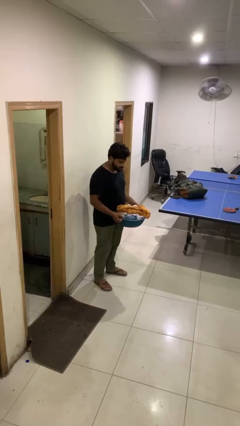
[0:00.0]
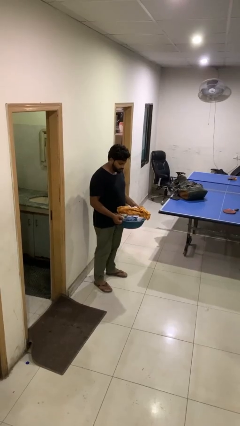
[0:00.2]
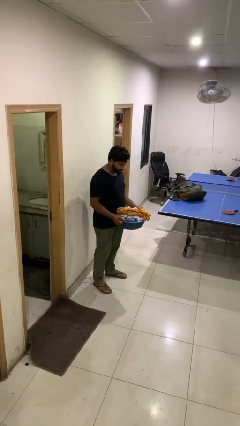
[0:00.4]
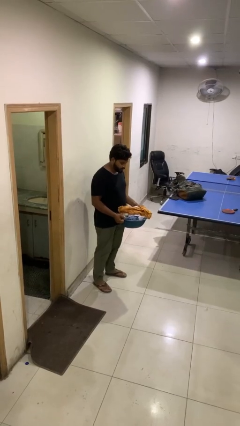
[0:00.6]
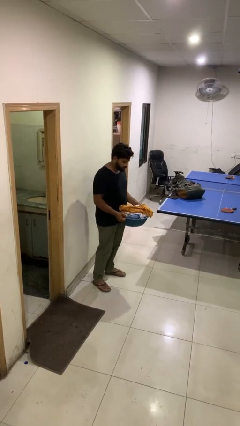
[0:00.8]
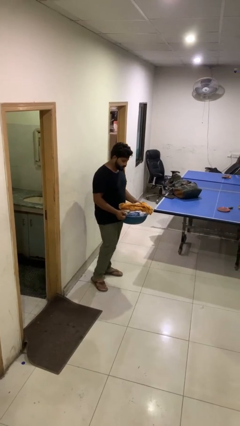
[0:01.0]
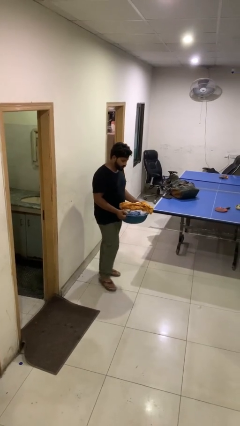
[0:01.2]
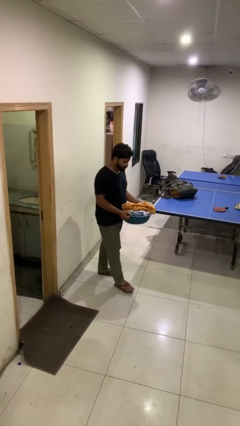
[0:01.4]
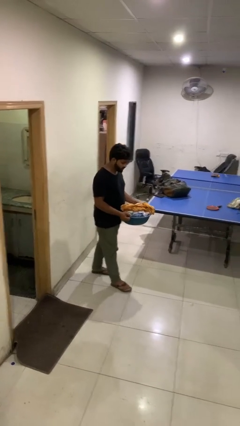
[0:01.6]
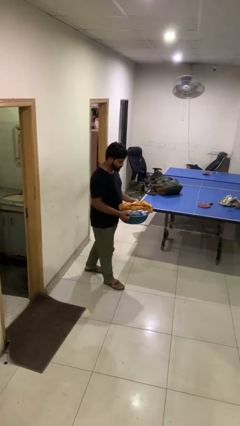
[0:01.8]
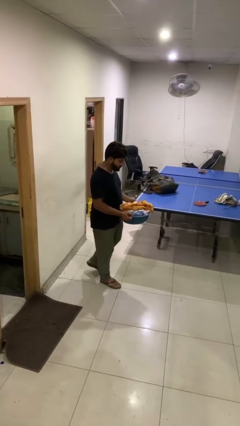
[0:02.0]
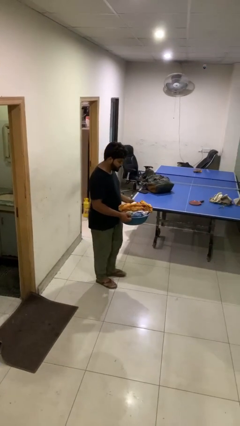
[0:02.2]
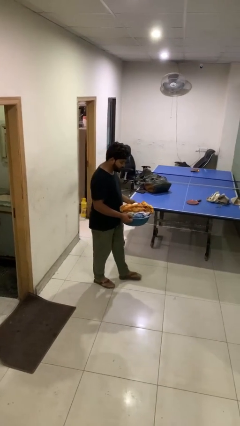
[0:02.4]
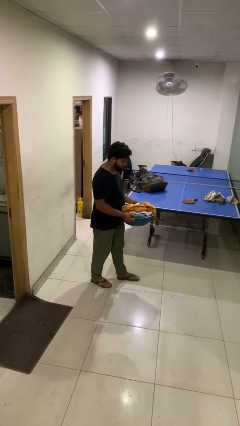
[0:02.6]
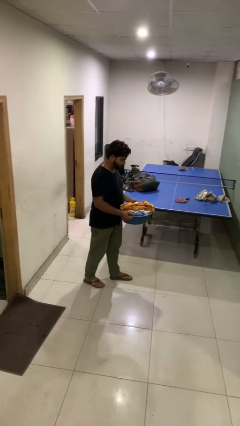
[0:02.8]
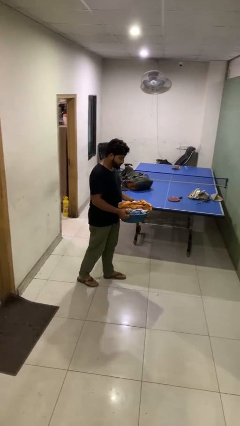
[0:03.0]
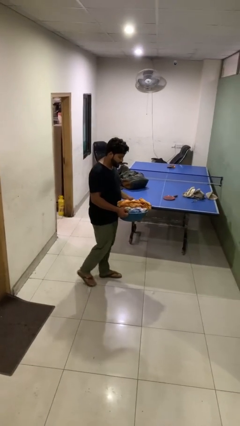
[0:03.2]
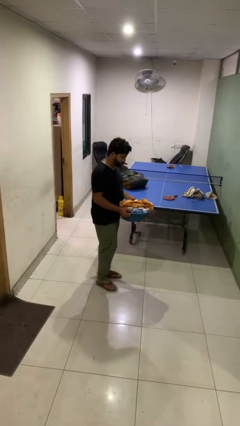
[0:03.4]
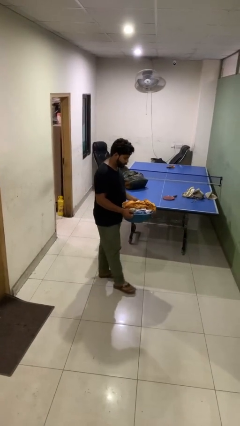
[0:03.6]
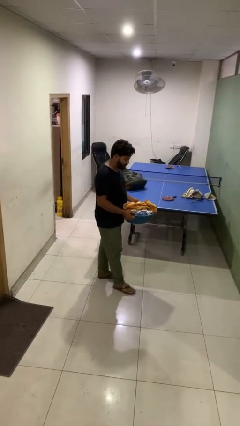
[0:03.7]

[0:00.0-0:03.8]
person carries laundry basket

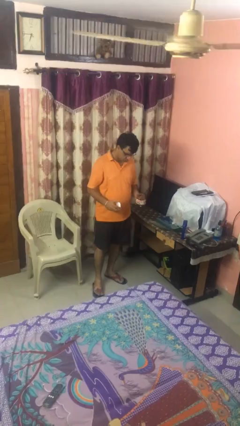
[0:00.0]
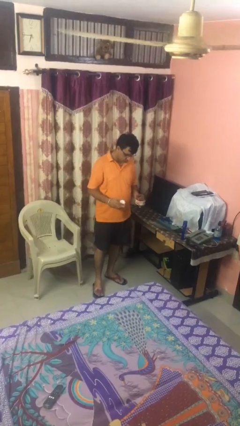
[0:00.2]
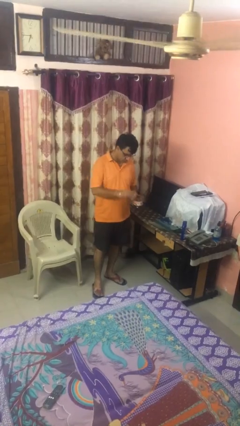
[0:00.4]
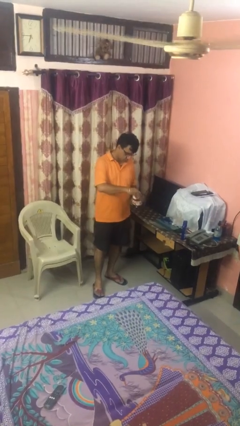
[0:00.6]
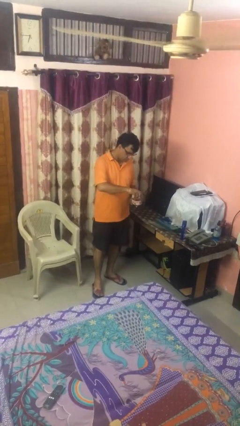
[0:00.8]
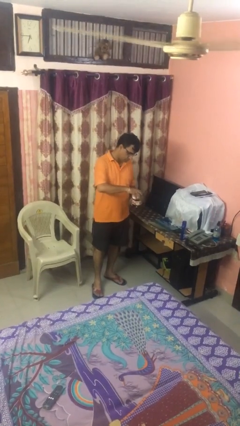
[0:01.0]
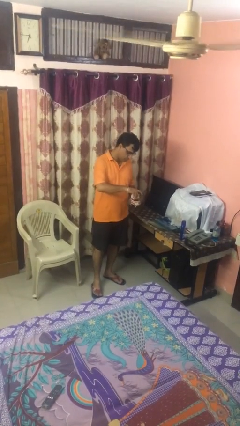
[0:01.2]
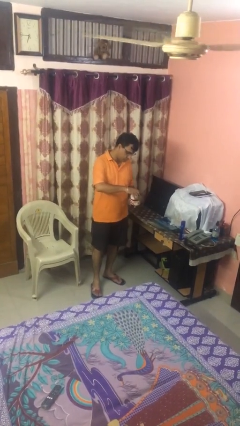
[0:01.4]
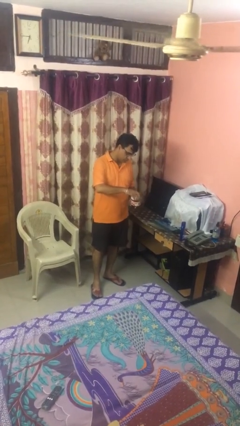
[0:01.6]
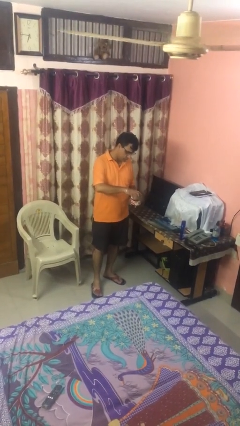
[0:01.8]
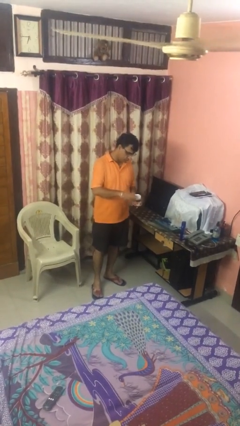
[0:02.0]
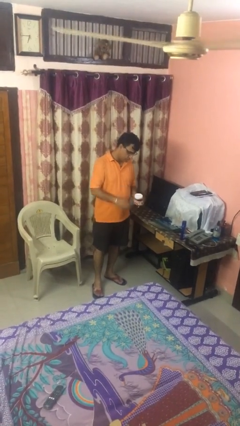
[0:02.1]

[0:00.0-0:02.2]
person closes jar

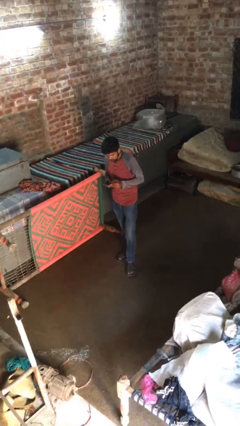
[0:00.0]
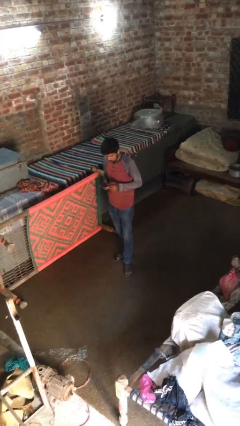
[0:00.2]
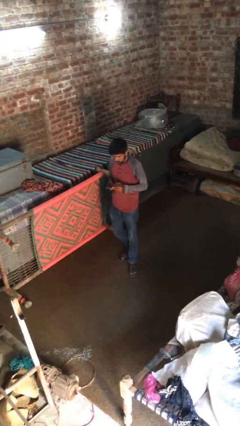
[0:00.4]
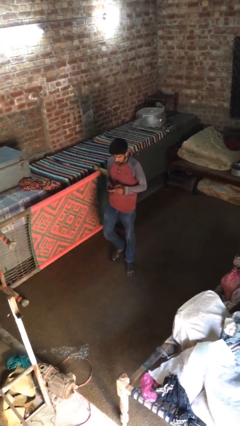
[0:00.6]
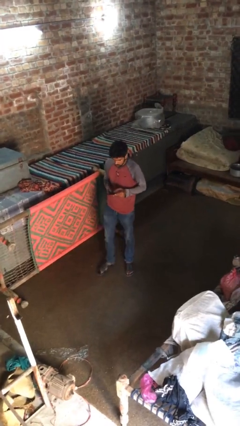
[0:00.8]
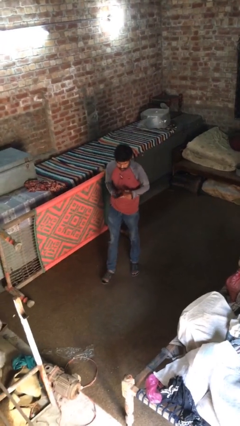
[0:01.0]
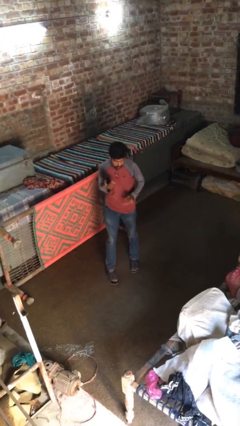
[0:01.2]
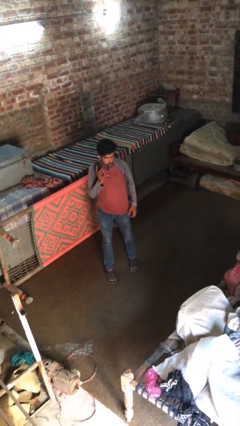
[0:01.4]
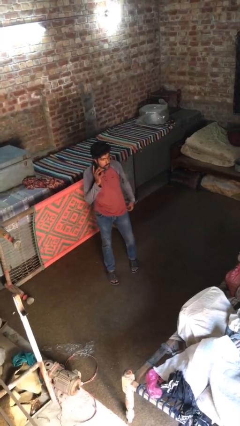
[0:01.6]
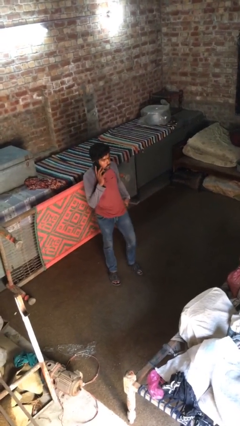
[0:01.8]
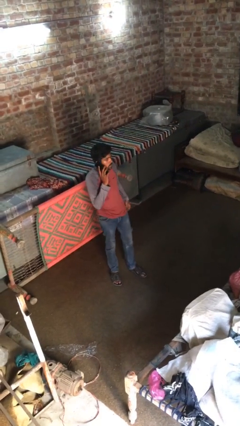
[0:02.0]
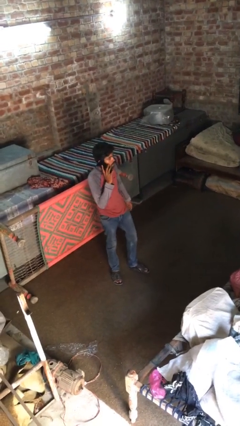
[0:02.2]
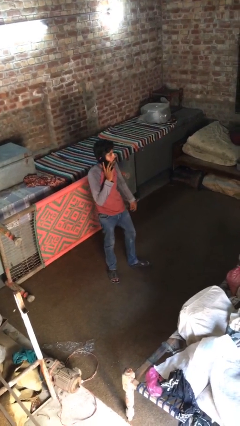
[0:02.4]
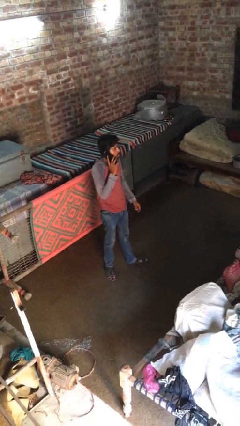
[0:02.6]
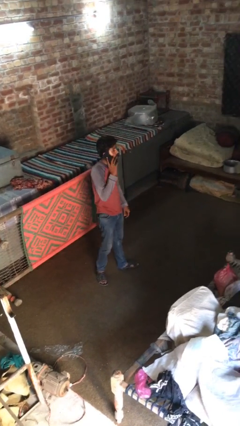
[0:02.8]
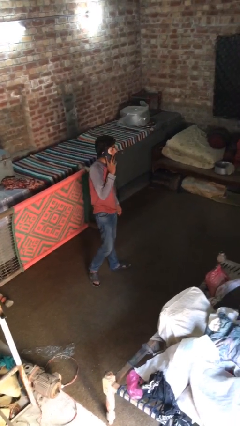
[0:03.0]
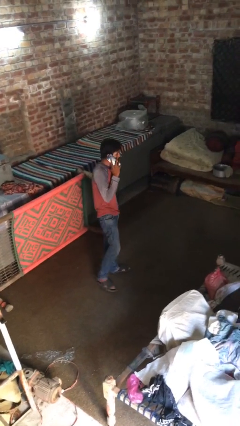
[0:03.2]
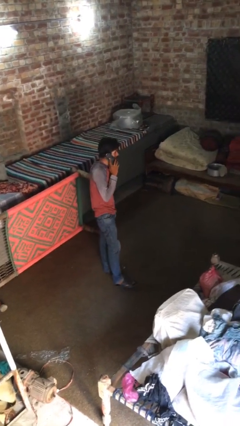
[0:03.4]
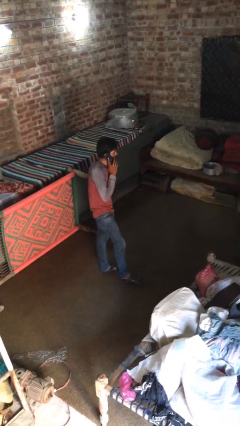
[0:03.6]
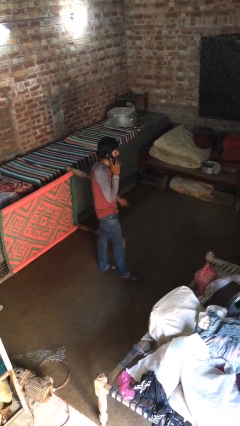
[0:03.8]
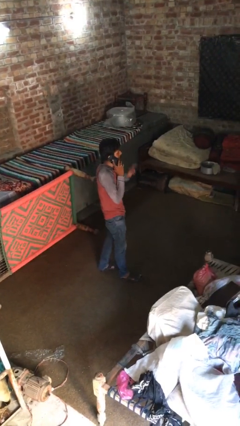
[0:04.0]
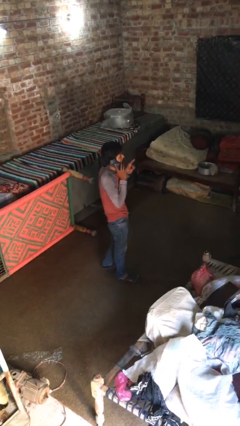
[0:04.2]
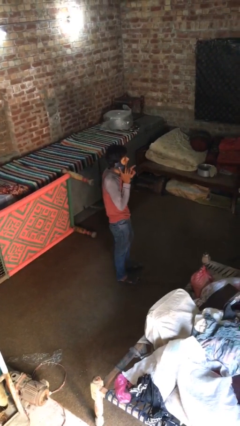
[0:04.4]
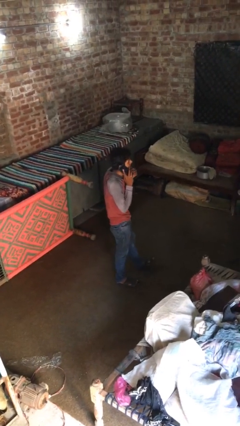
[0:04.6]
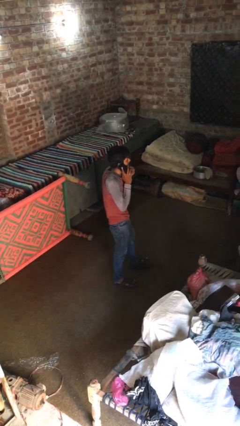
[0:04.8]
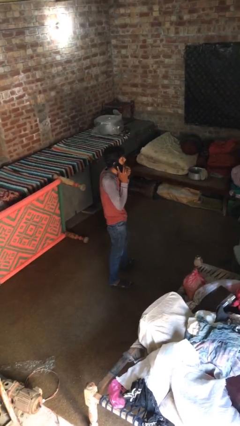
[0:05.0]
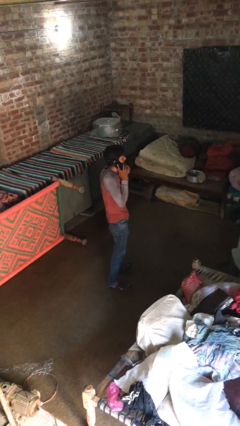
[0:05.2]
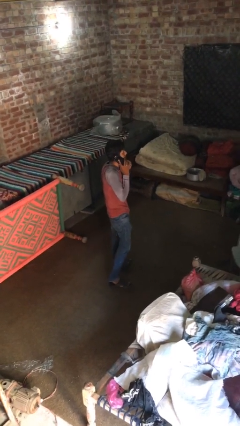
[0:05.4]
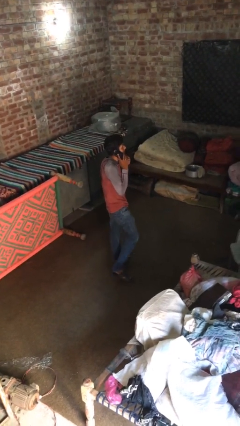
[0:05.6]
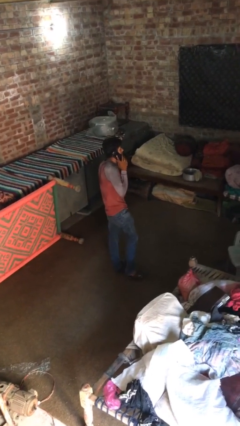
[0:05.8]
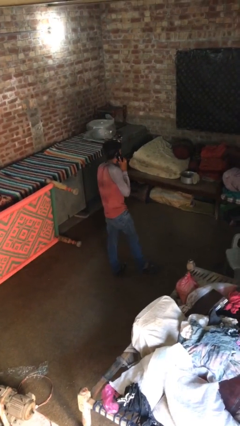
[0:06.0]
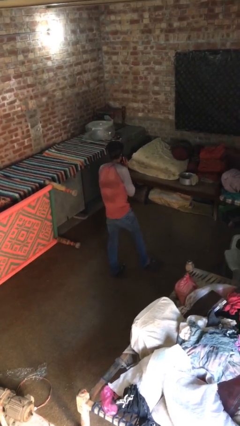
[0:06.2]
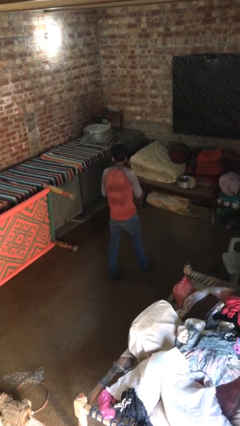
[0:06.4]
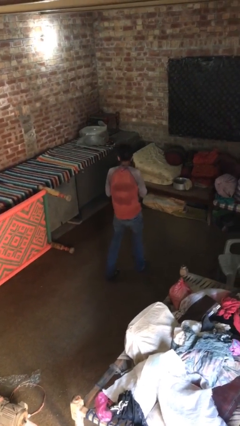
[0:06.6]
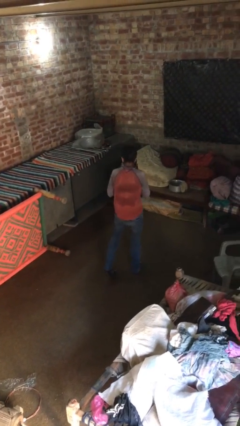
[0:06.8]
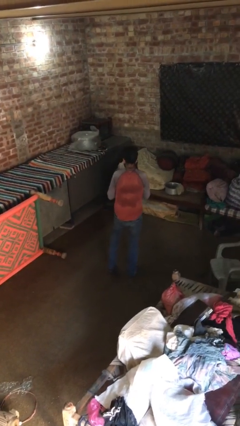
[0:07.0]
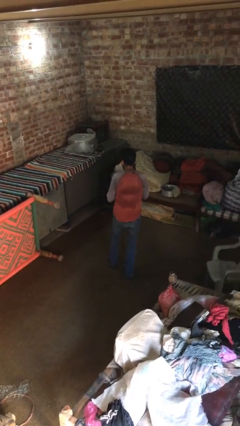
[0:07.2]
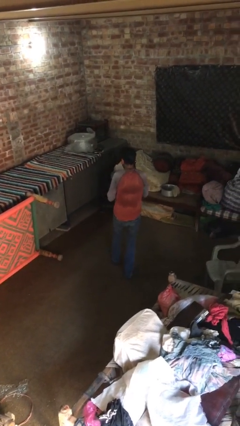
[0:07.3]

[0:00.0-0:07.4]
person talks on phone

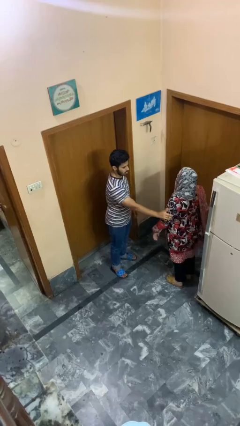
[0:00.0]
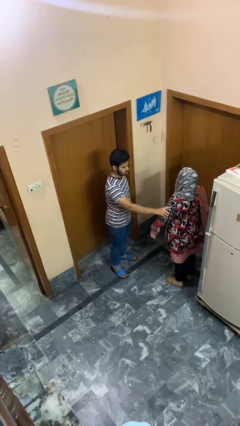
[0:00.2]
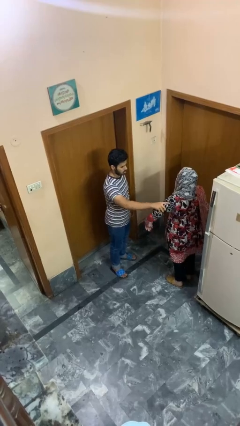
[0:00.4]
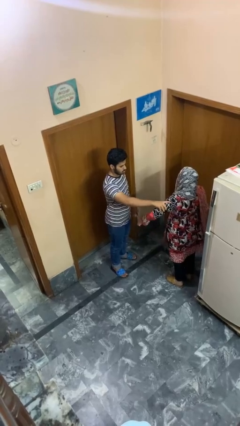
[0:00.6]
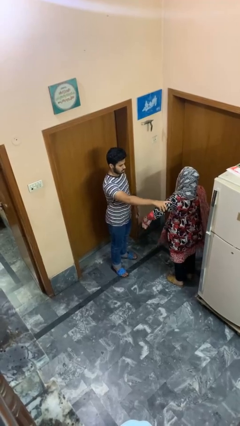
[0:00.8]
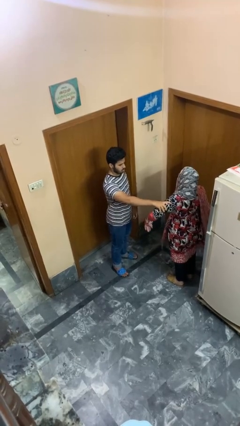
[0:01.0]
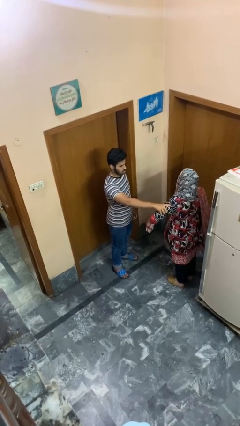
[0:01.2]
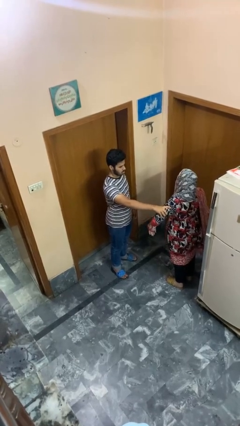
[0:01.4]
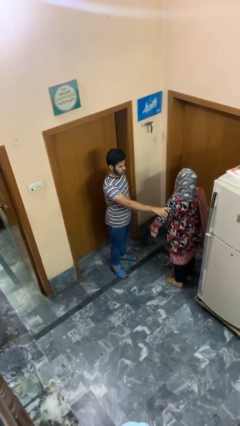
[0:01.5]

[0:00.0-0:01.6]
person grabs person by bicep

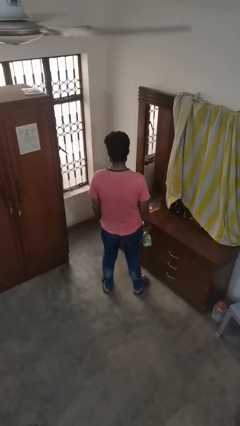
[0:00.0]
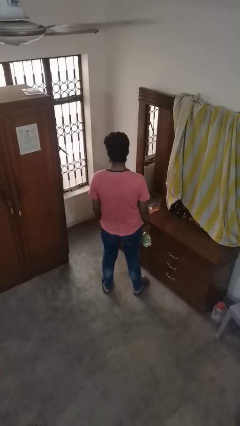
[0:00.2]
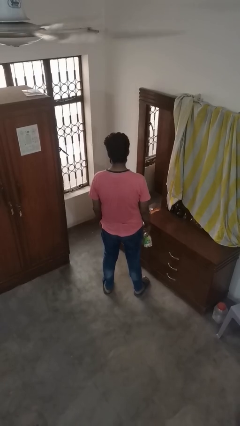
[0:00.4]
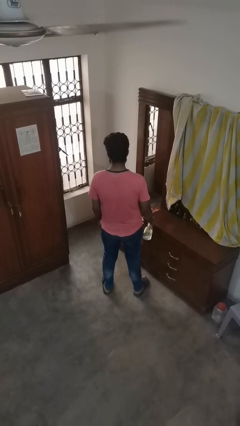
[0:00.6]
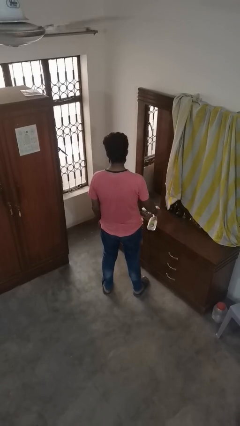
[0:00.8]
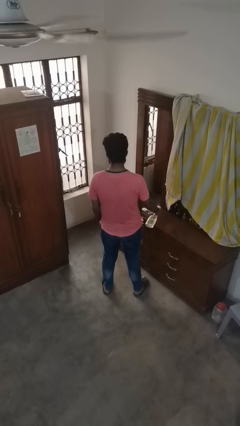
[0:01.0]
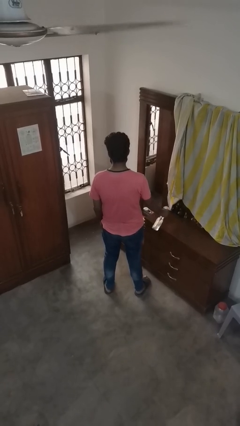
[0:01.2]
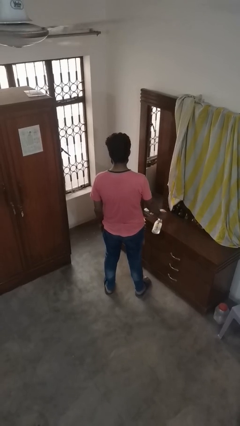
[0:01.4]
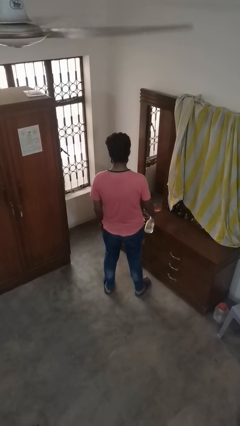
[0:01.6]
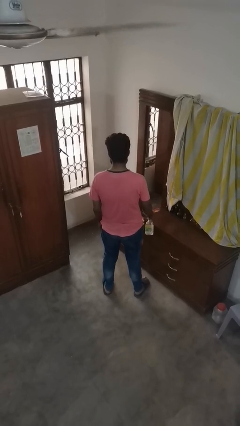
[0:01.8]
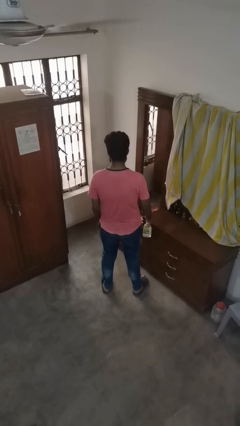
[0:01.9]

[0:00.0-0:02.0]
person sprays from bottle

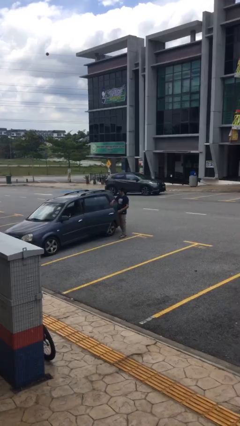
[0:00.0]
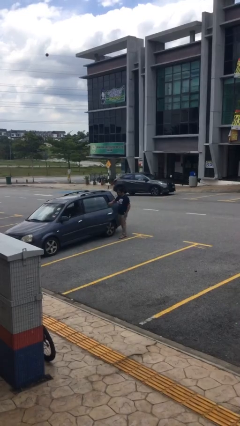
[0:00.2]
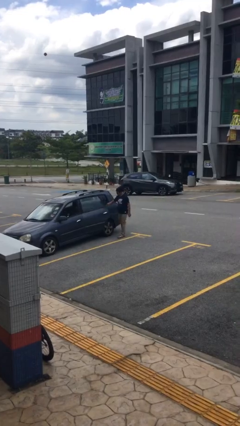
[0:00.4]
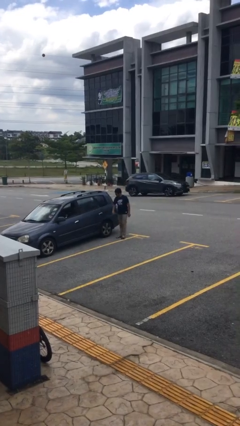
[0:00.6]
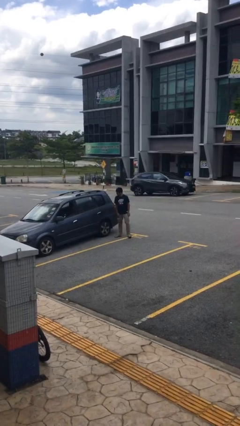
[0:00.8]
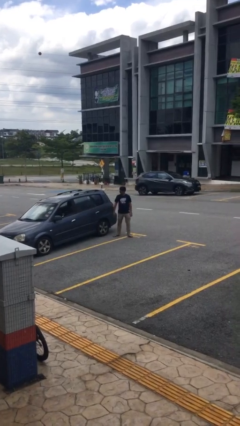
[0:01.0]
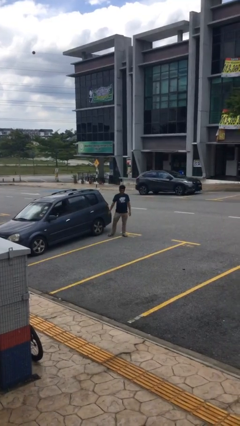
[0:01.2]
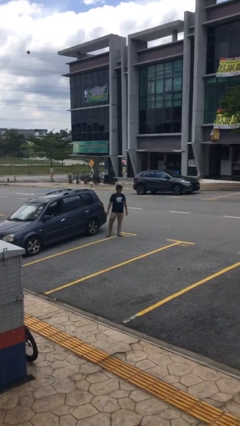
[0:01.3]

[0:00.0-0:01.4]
person closes car door
